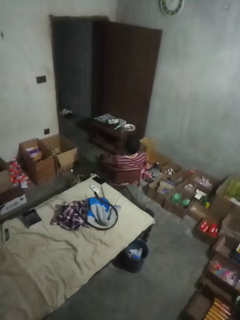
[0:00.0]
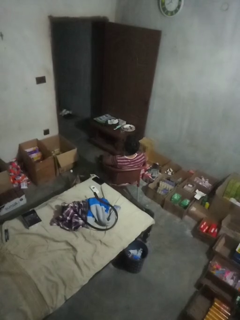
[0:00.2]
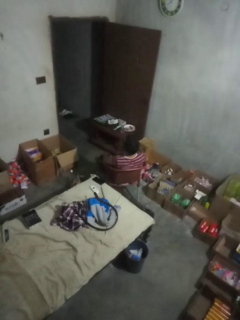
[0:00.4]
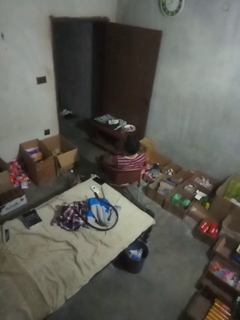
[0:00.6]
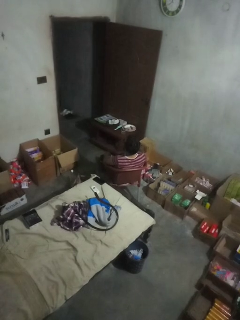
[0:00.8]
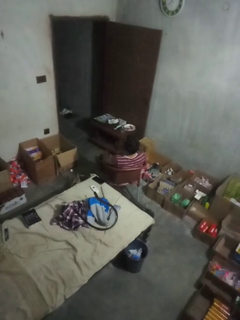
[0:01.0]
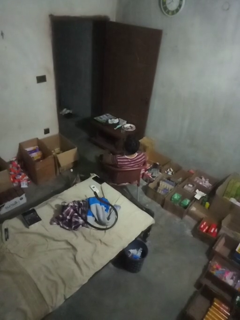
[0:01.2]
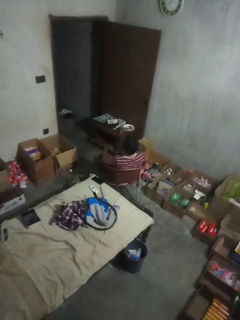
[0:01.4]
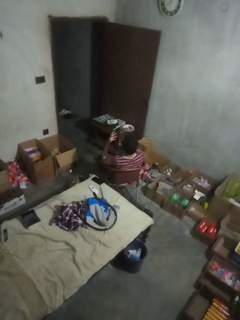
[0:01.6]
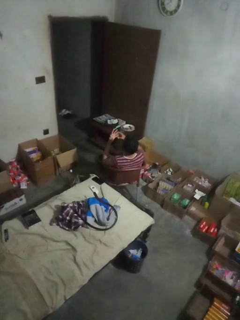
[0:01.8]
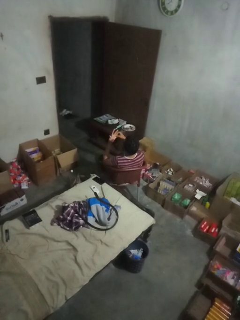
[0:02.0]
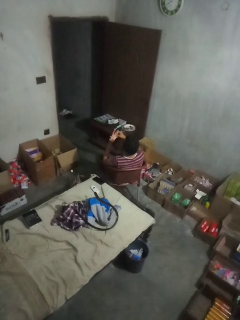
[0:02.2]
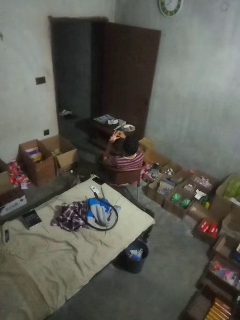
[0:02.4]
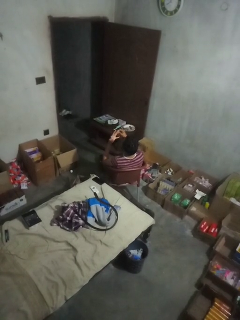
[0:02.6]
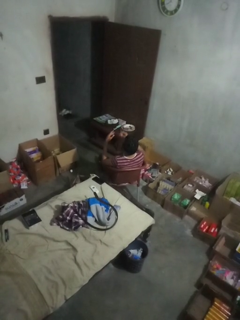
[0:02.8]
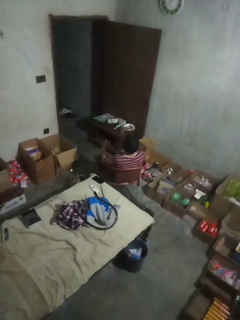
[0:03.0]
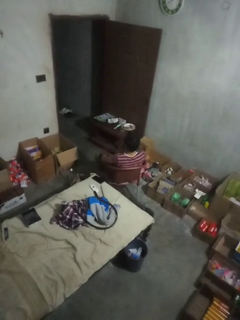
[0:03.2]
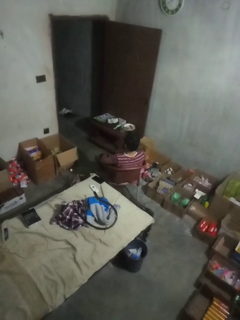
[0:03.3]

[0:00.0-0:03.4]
person takes off ring

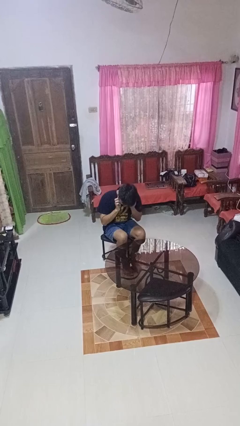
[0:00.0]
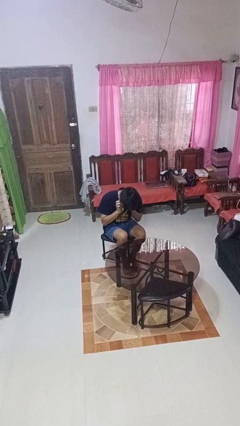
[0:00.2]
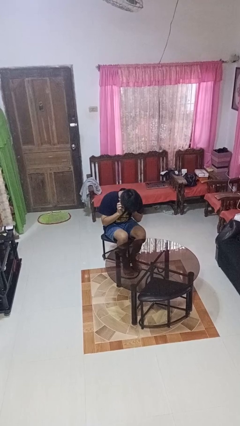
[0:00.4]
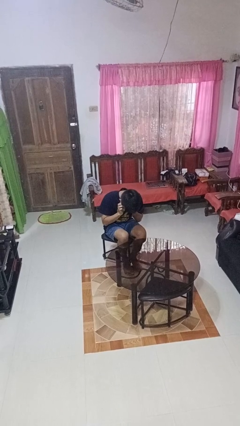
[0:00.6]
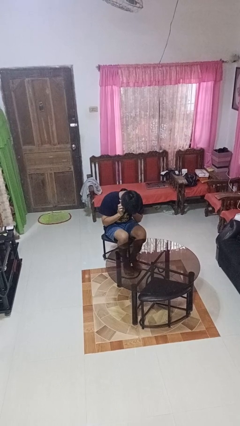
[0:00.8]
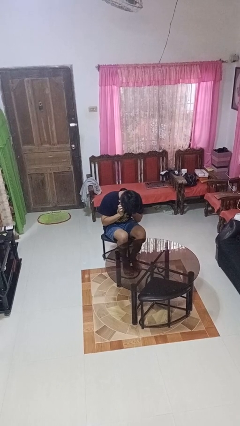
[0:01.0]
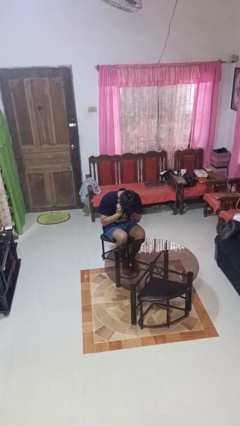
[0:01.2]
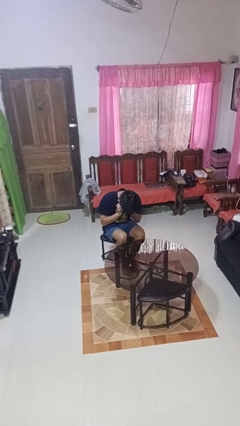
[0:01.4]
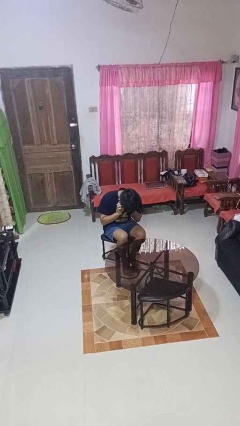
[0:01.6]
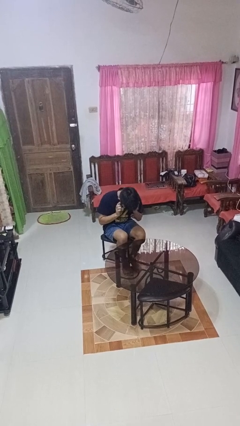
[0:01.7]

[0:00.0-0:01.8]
person puts fingers in ear

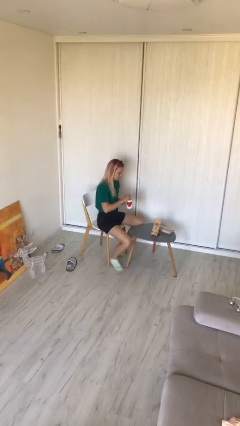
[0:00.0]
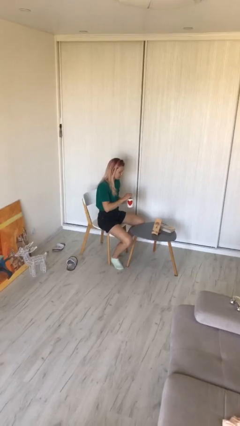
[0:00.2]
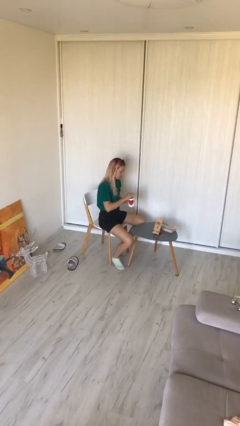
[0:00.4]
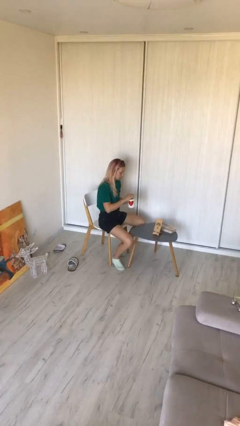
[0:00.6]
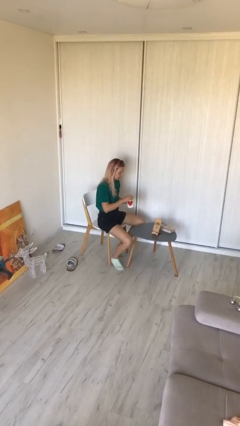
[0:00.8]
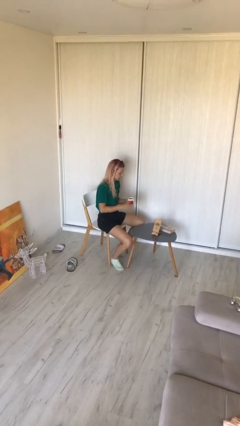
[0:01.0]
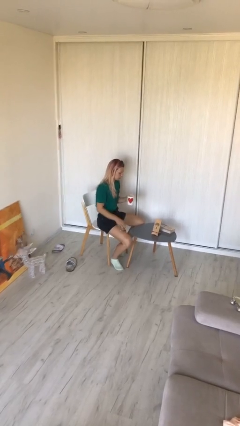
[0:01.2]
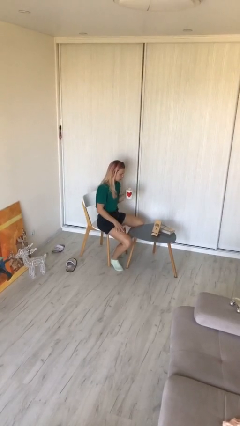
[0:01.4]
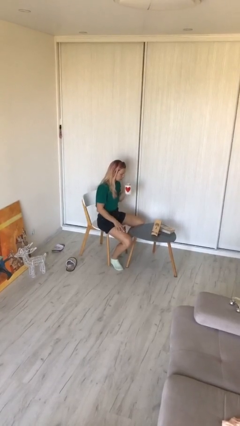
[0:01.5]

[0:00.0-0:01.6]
person stirs mug

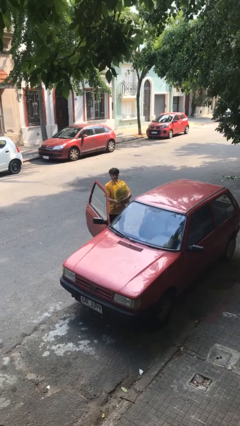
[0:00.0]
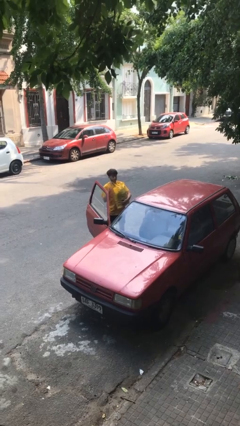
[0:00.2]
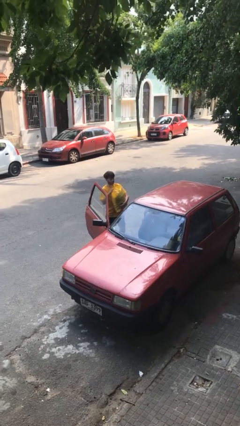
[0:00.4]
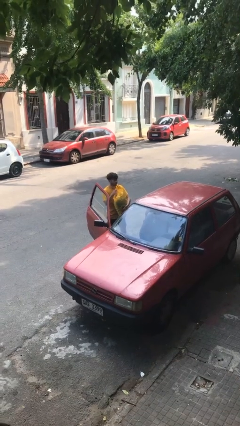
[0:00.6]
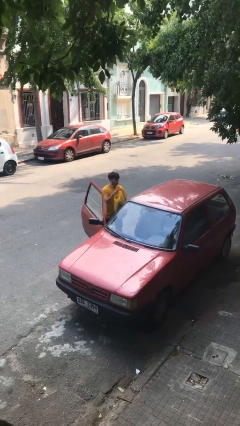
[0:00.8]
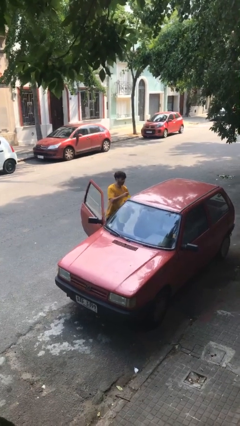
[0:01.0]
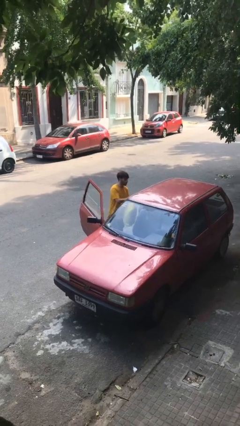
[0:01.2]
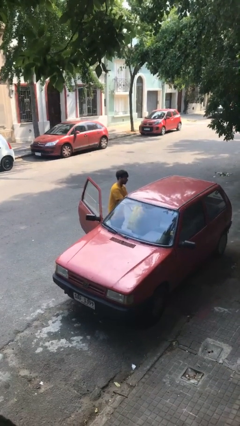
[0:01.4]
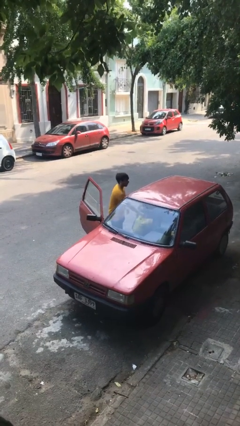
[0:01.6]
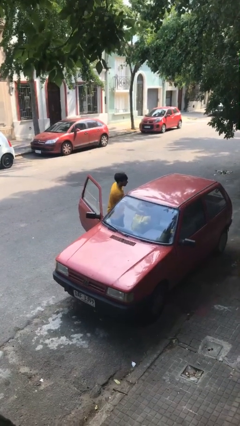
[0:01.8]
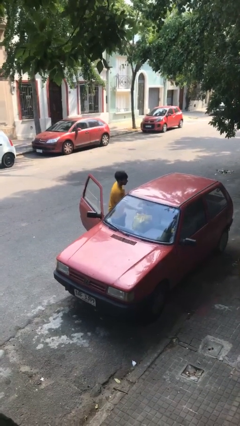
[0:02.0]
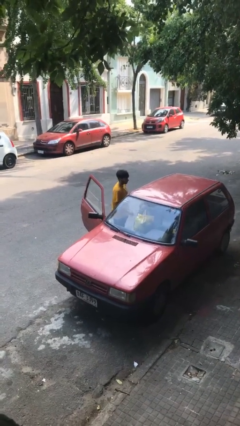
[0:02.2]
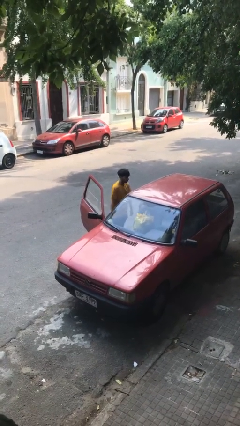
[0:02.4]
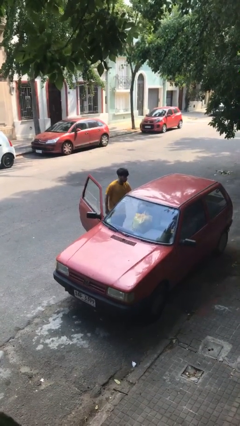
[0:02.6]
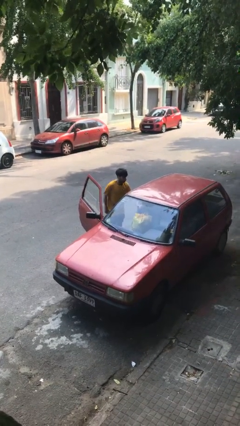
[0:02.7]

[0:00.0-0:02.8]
person loads car

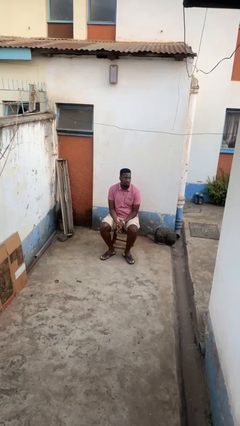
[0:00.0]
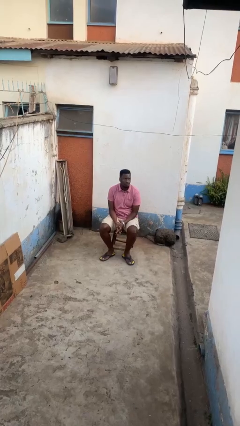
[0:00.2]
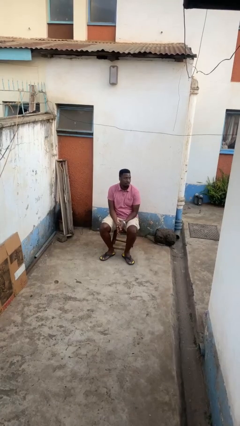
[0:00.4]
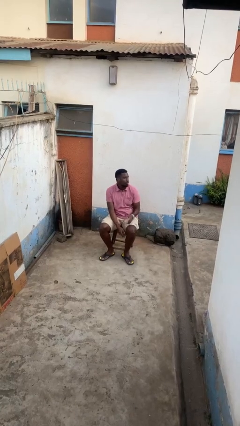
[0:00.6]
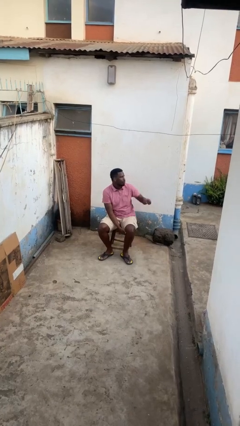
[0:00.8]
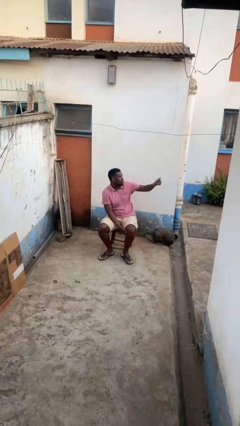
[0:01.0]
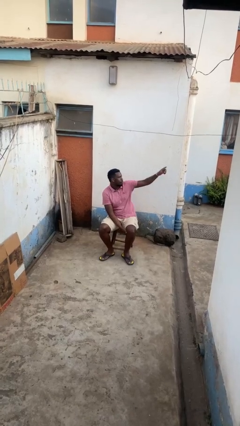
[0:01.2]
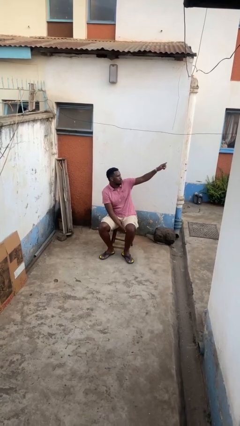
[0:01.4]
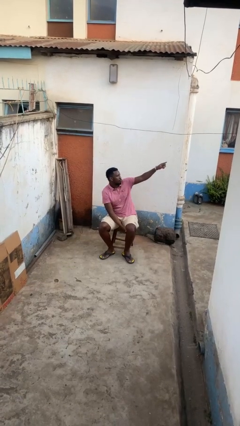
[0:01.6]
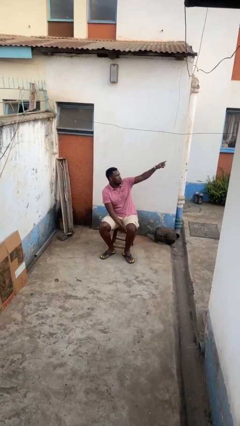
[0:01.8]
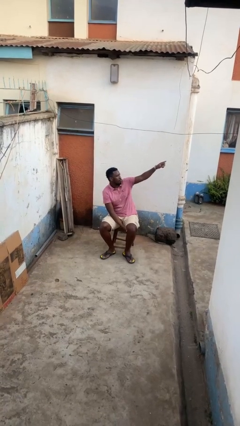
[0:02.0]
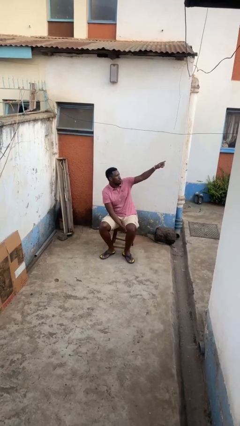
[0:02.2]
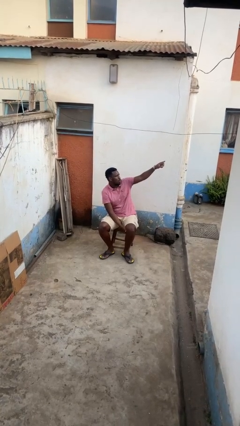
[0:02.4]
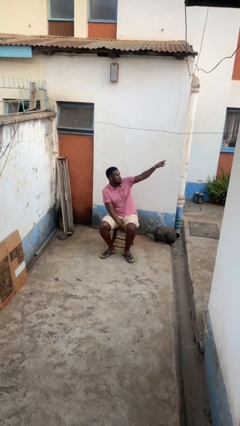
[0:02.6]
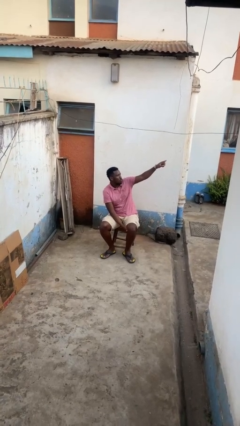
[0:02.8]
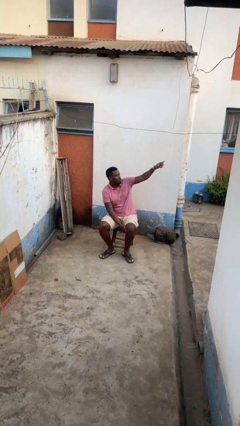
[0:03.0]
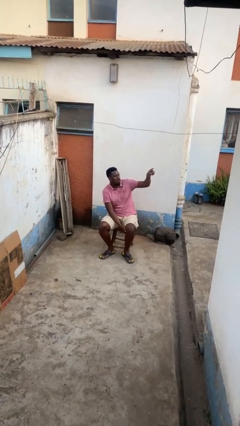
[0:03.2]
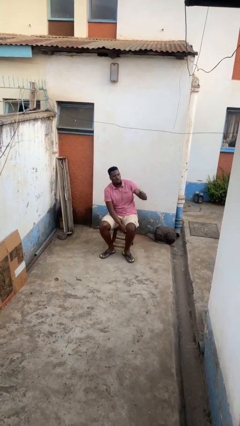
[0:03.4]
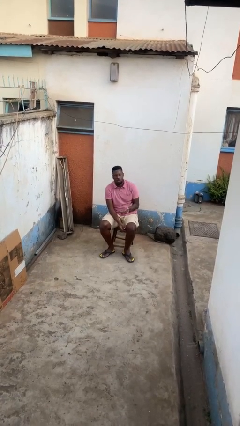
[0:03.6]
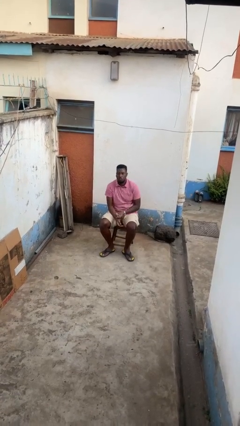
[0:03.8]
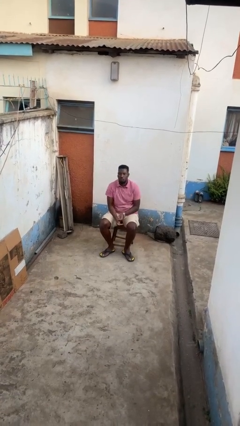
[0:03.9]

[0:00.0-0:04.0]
person points at person

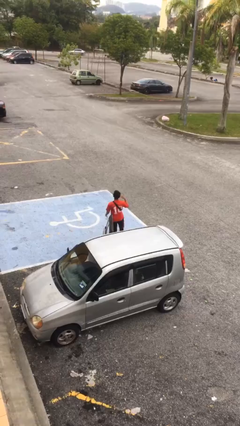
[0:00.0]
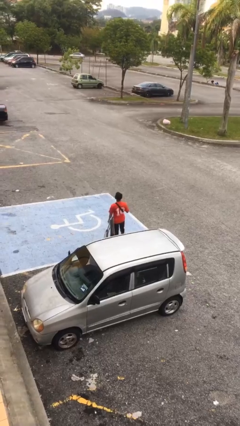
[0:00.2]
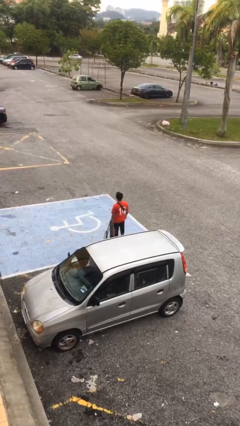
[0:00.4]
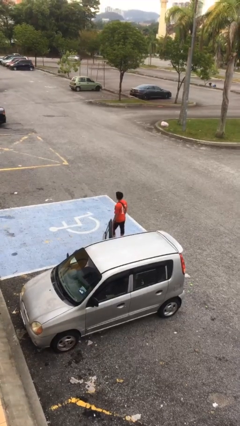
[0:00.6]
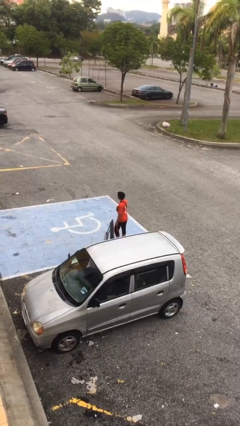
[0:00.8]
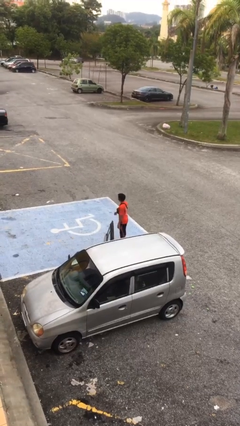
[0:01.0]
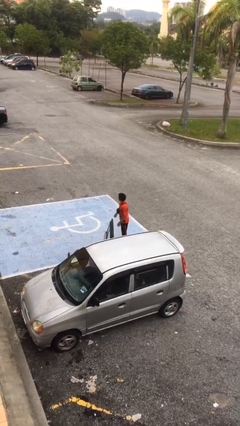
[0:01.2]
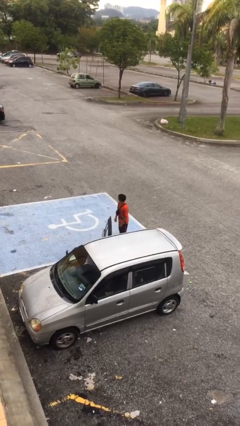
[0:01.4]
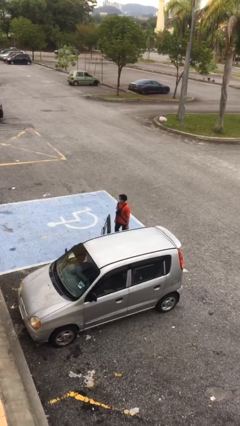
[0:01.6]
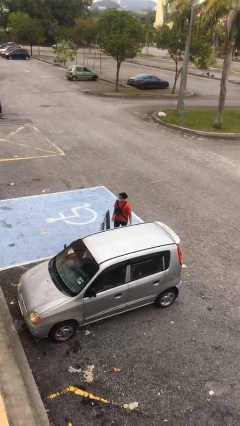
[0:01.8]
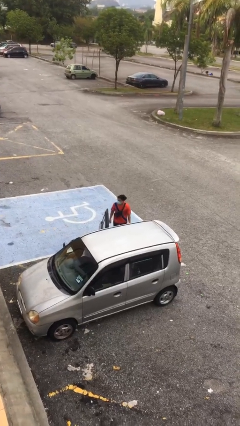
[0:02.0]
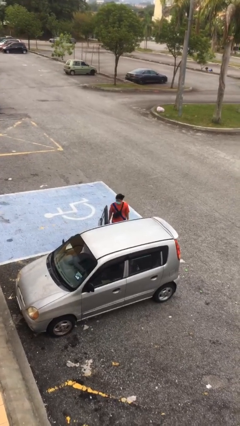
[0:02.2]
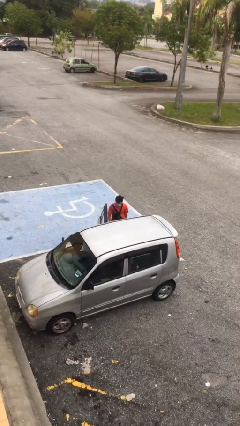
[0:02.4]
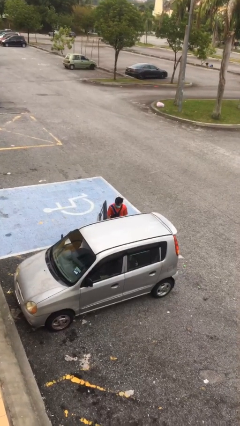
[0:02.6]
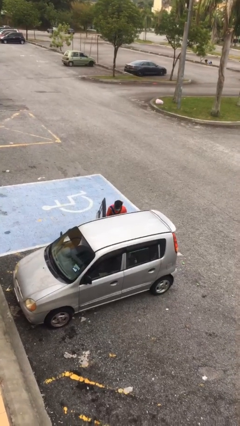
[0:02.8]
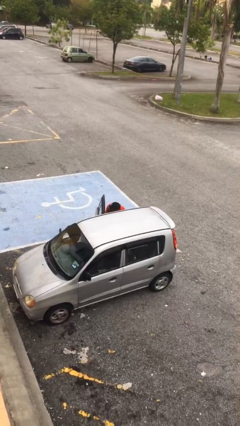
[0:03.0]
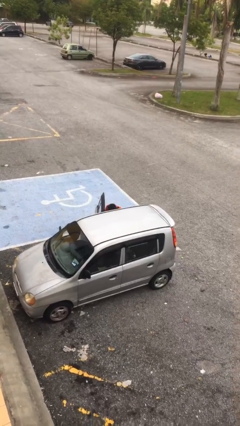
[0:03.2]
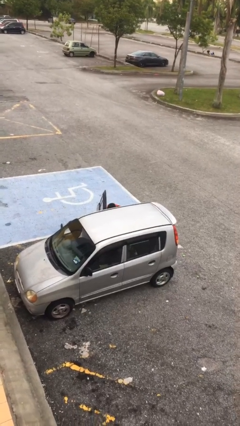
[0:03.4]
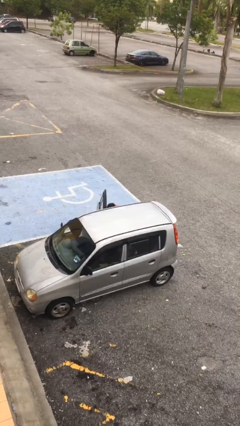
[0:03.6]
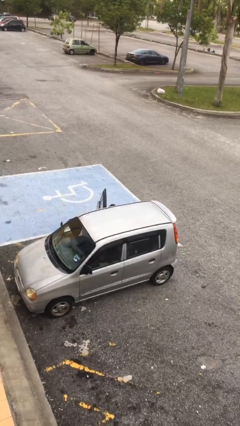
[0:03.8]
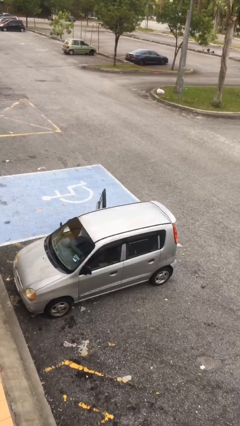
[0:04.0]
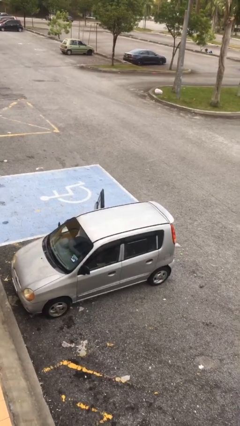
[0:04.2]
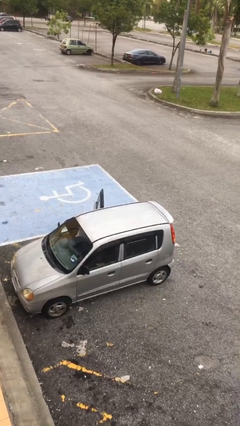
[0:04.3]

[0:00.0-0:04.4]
person enters car

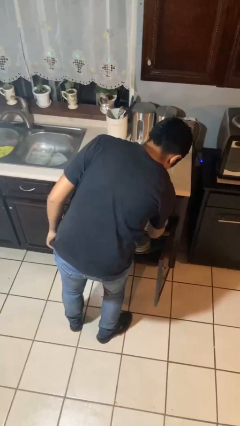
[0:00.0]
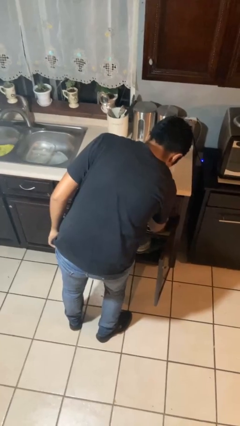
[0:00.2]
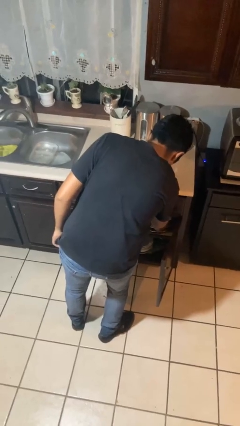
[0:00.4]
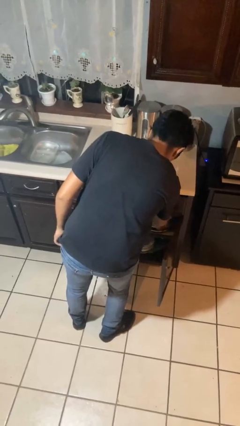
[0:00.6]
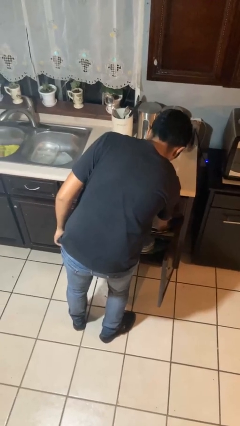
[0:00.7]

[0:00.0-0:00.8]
person takes object from cabinet
